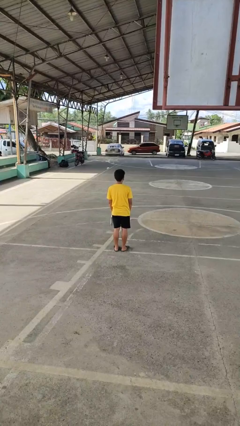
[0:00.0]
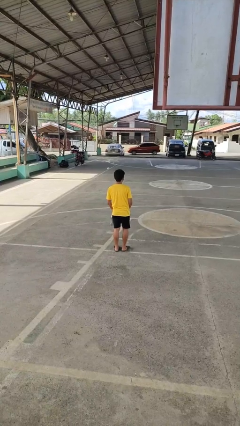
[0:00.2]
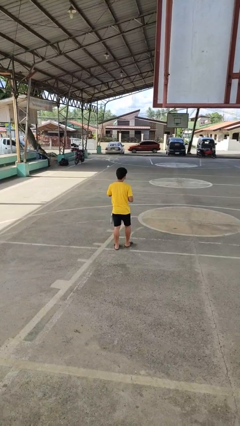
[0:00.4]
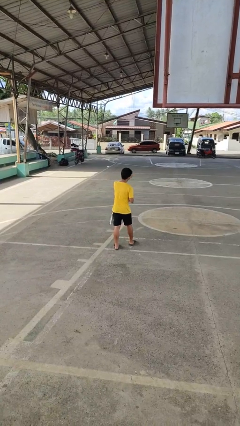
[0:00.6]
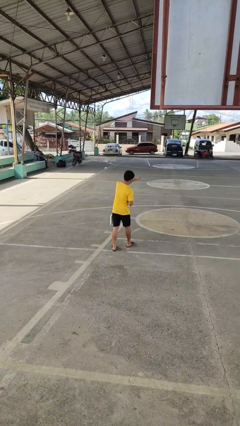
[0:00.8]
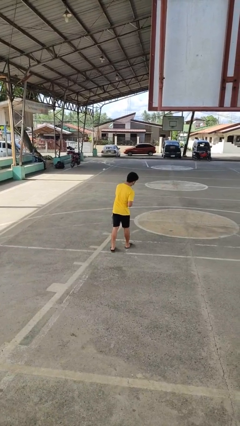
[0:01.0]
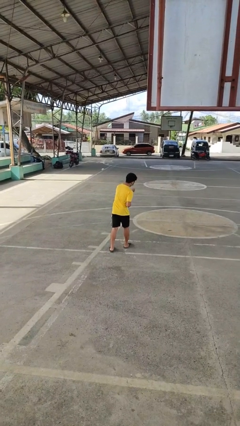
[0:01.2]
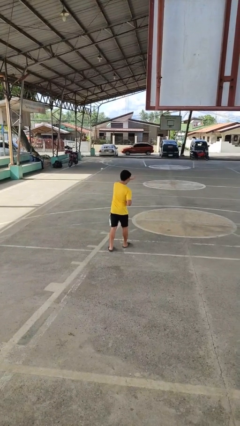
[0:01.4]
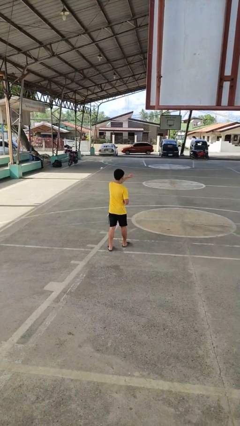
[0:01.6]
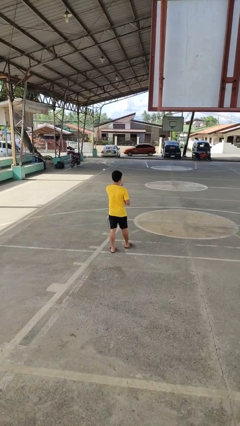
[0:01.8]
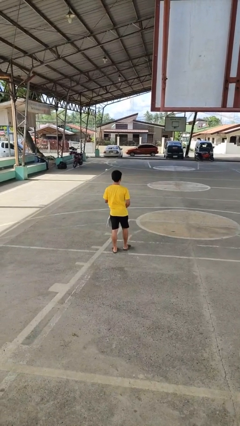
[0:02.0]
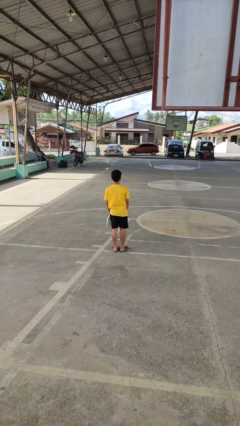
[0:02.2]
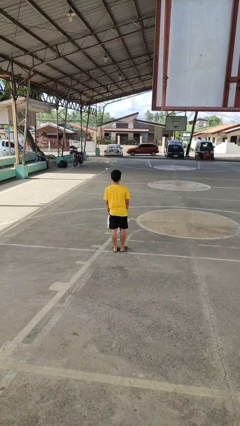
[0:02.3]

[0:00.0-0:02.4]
person punches

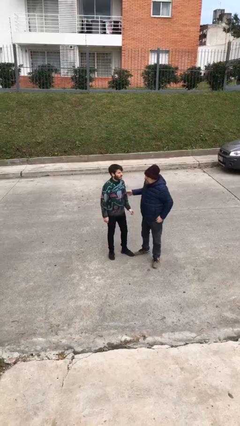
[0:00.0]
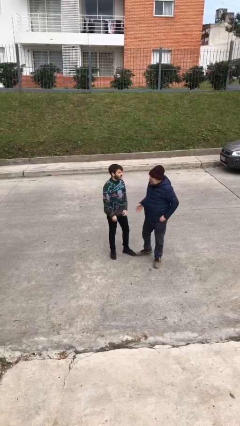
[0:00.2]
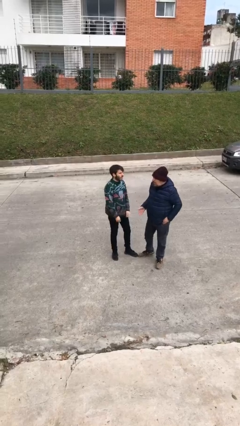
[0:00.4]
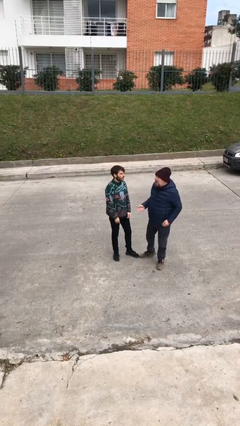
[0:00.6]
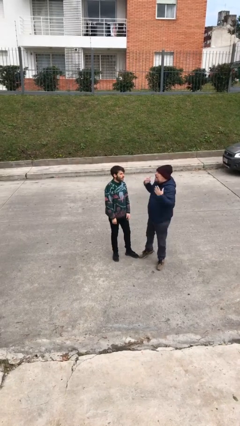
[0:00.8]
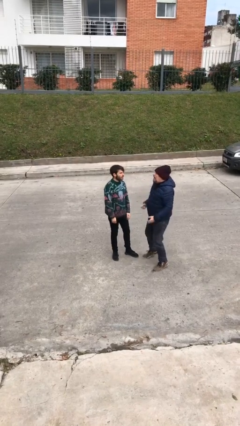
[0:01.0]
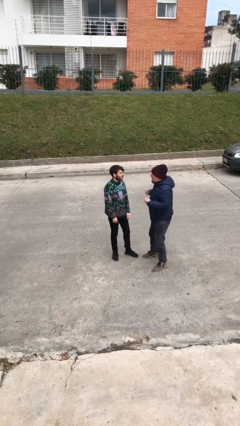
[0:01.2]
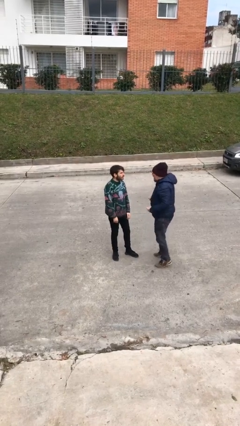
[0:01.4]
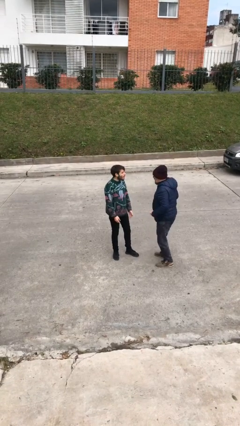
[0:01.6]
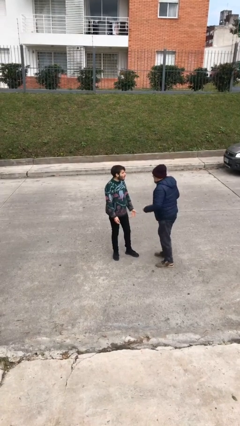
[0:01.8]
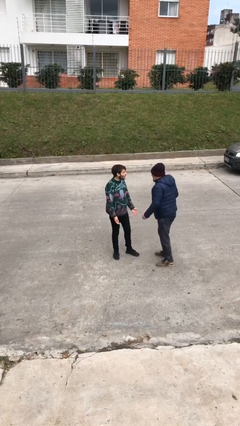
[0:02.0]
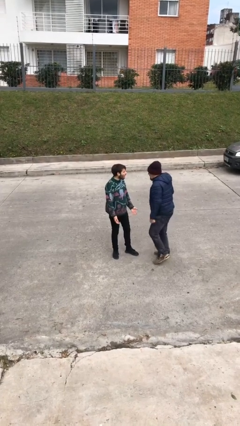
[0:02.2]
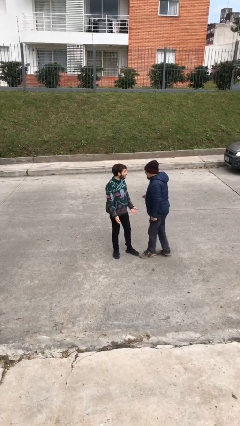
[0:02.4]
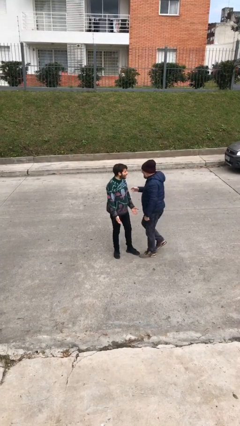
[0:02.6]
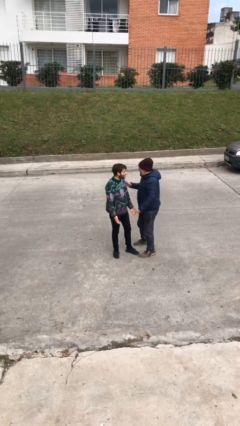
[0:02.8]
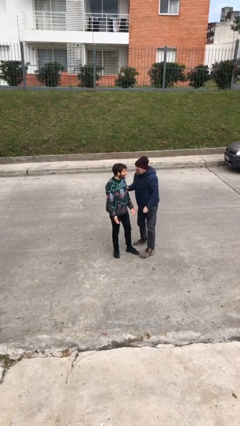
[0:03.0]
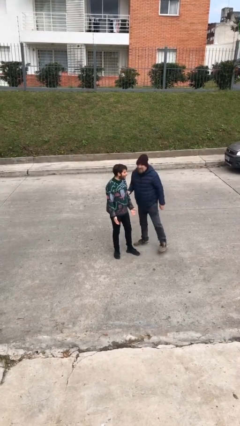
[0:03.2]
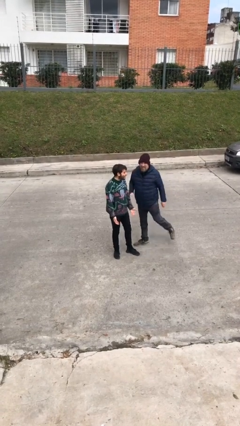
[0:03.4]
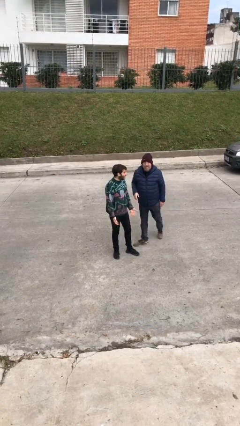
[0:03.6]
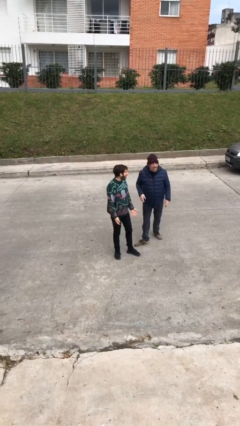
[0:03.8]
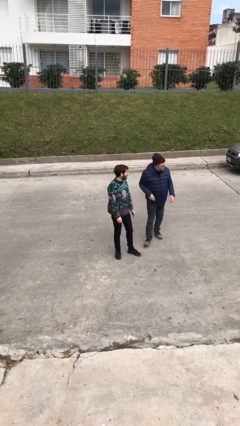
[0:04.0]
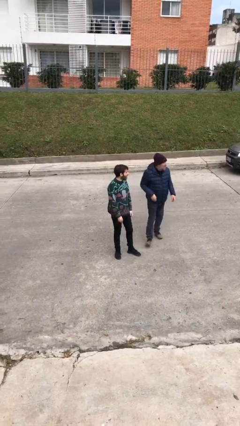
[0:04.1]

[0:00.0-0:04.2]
person talks to person

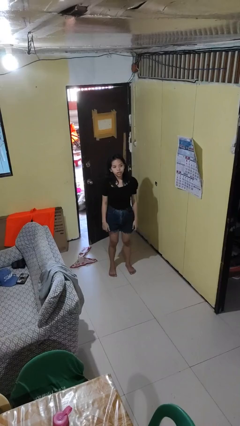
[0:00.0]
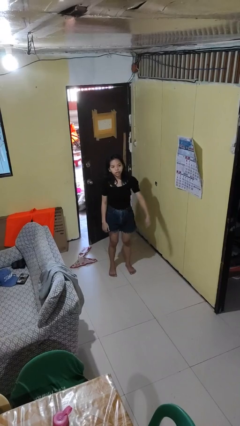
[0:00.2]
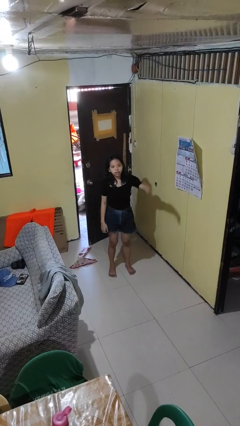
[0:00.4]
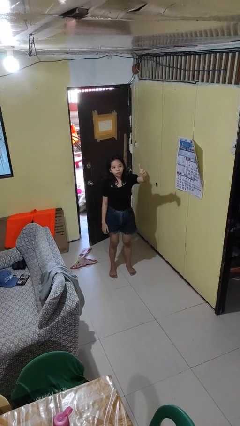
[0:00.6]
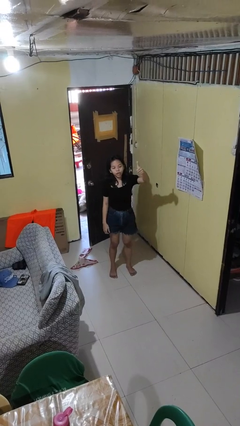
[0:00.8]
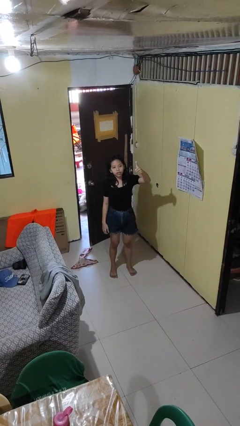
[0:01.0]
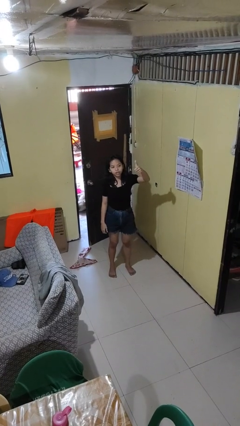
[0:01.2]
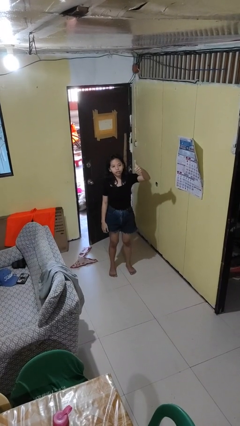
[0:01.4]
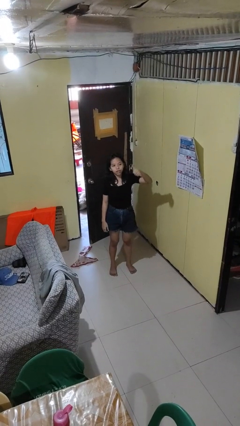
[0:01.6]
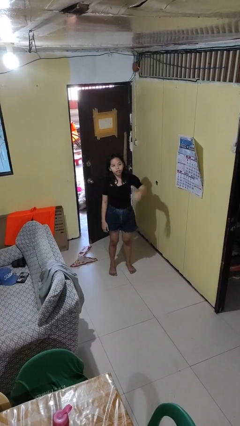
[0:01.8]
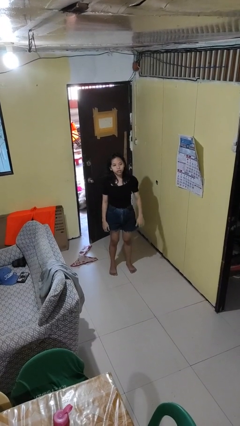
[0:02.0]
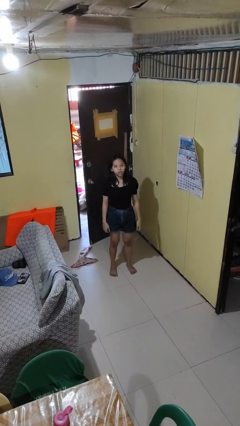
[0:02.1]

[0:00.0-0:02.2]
person gestures thumbs up

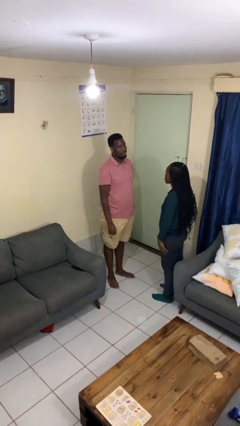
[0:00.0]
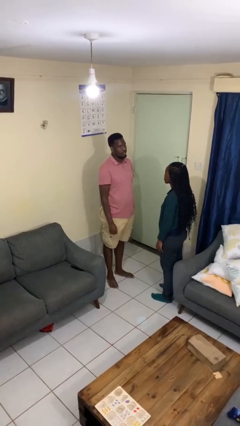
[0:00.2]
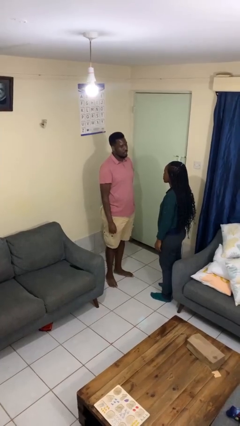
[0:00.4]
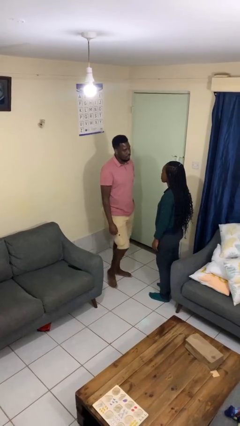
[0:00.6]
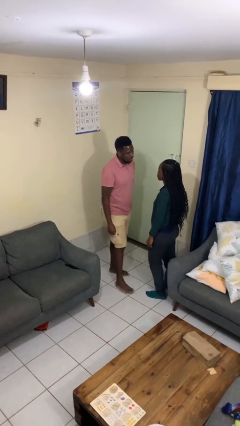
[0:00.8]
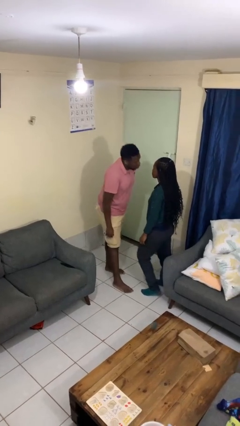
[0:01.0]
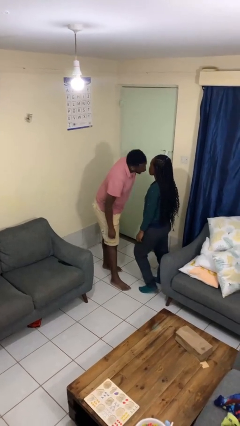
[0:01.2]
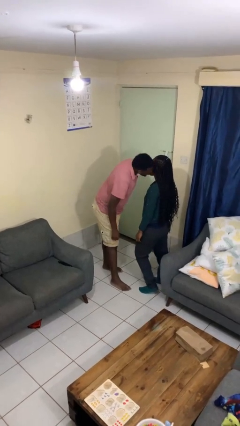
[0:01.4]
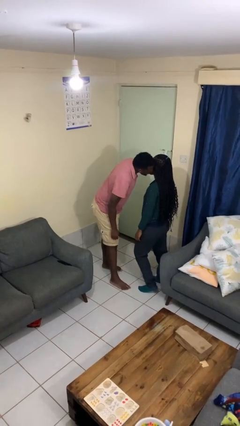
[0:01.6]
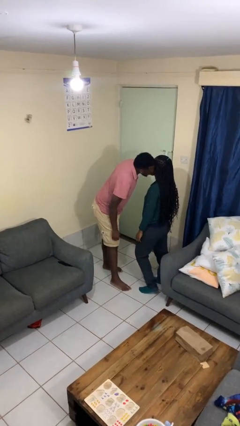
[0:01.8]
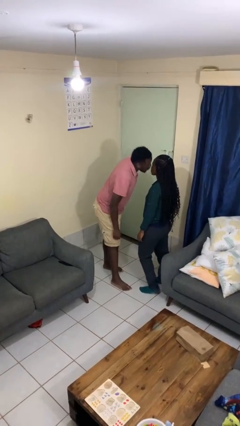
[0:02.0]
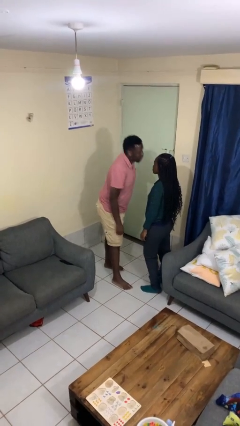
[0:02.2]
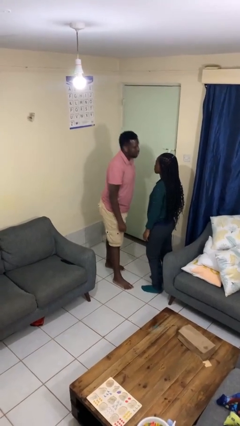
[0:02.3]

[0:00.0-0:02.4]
person kisses cheek of person

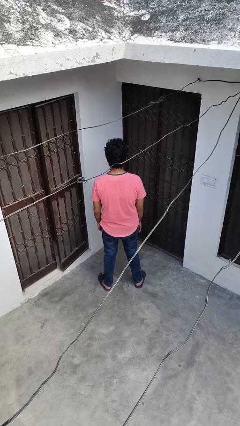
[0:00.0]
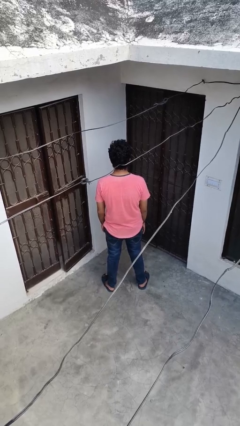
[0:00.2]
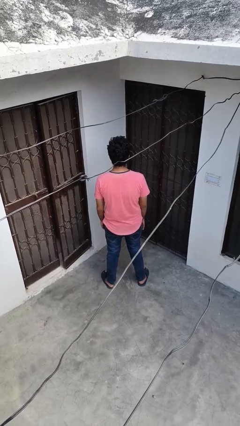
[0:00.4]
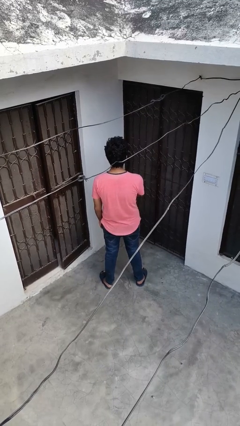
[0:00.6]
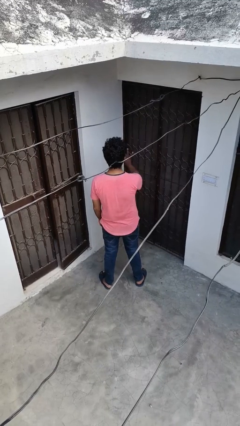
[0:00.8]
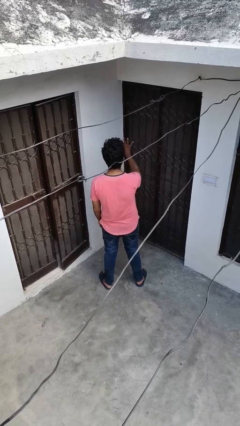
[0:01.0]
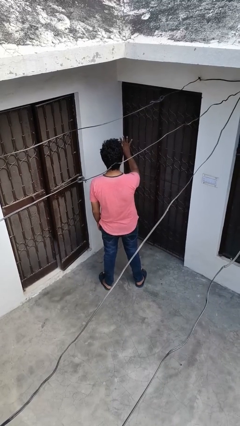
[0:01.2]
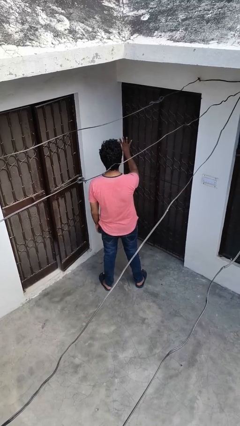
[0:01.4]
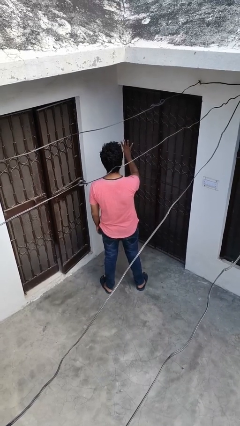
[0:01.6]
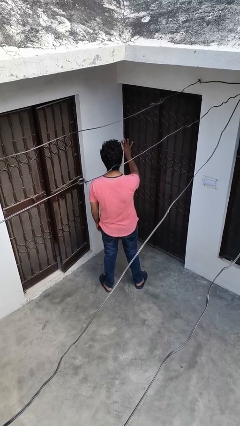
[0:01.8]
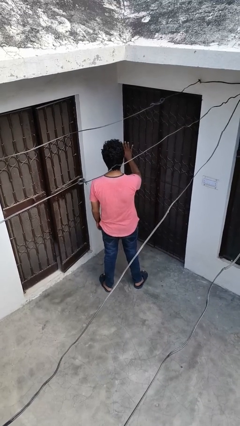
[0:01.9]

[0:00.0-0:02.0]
person gestures number four

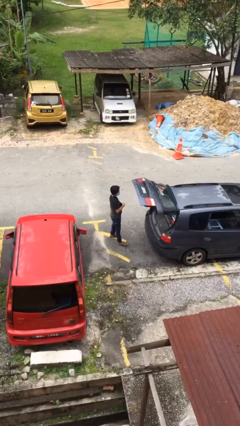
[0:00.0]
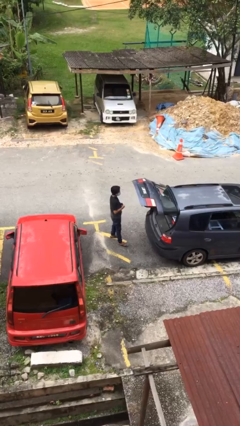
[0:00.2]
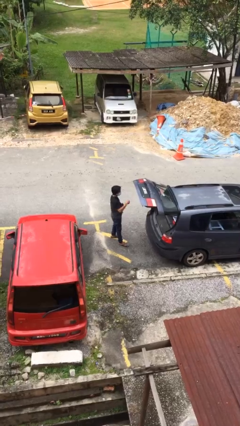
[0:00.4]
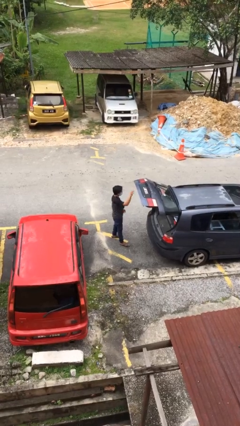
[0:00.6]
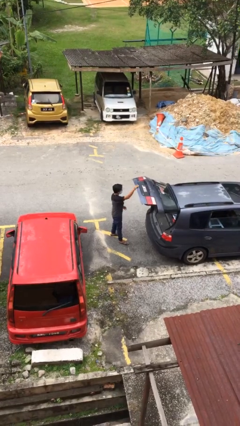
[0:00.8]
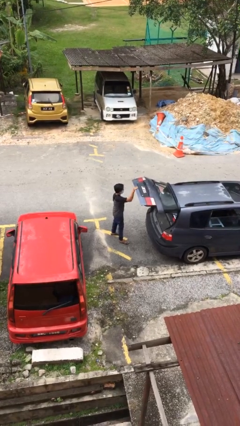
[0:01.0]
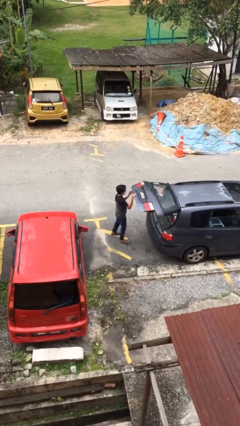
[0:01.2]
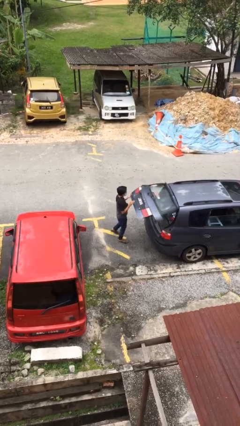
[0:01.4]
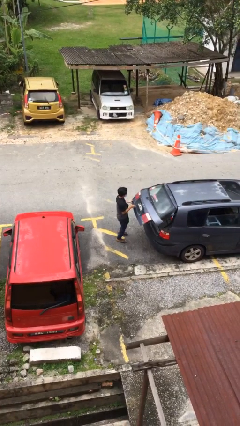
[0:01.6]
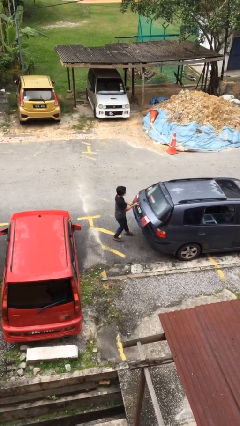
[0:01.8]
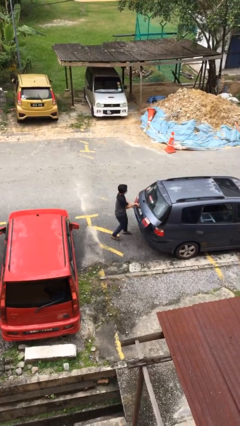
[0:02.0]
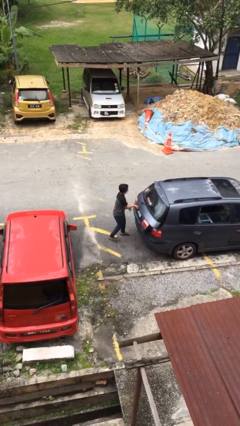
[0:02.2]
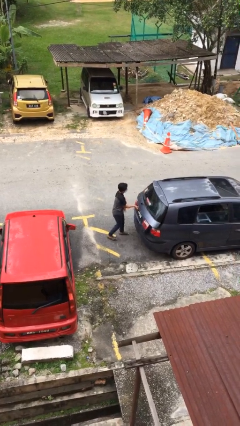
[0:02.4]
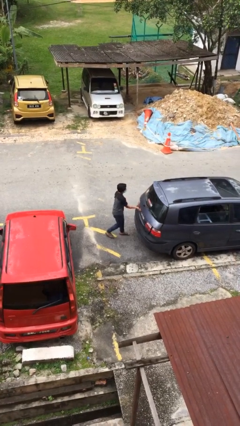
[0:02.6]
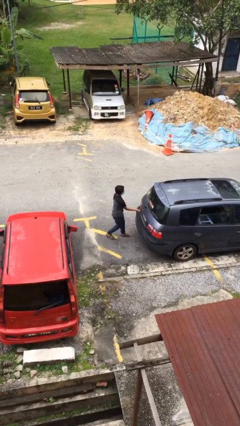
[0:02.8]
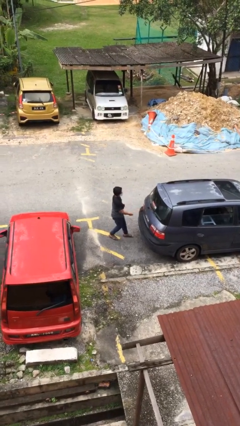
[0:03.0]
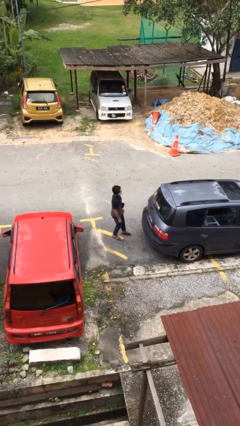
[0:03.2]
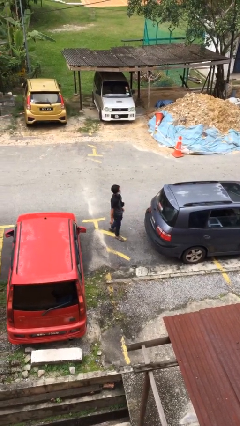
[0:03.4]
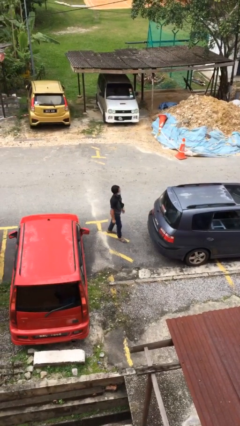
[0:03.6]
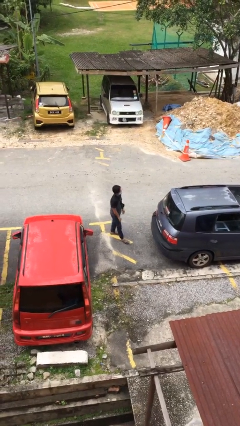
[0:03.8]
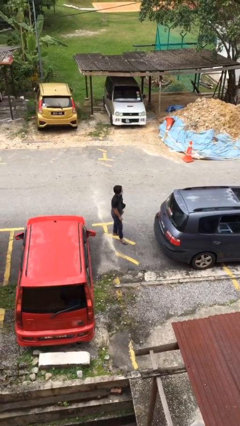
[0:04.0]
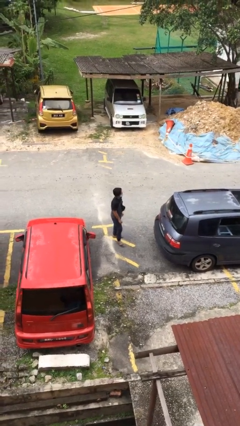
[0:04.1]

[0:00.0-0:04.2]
person closes car trunk
